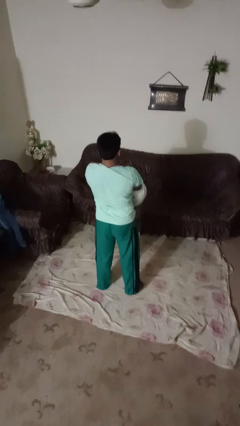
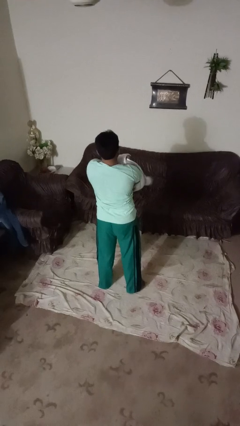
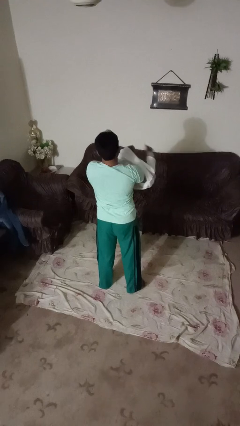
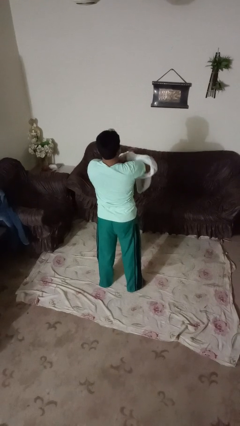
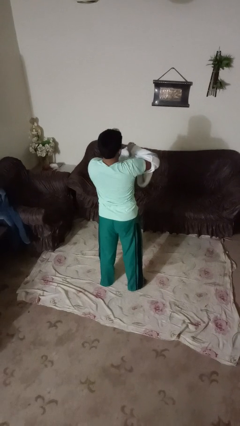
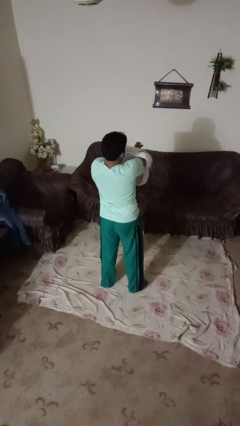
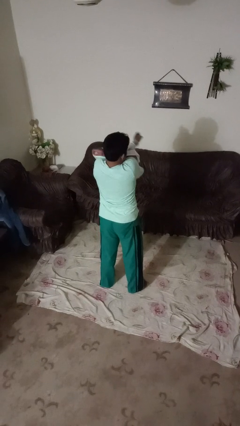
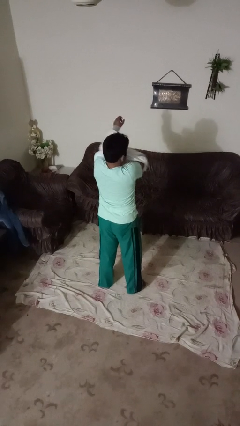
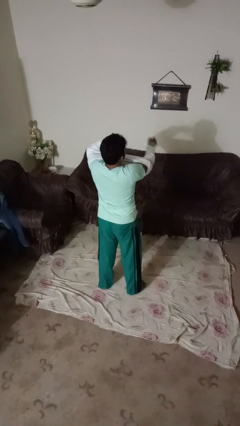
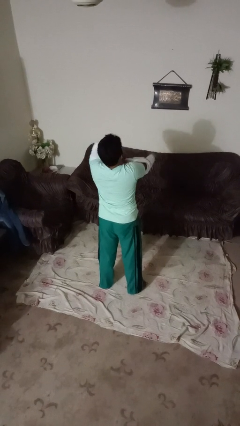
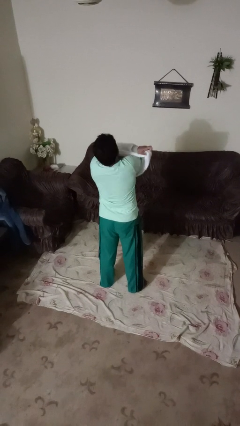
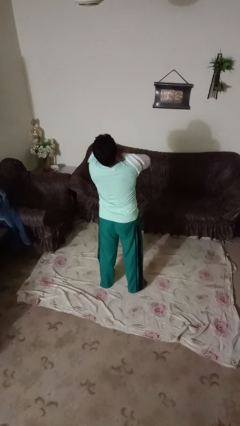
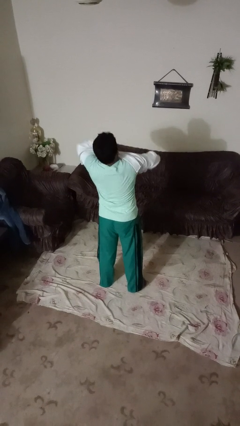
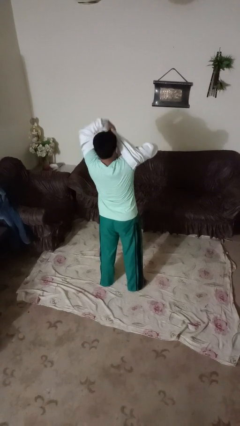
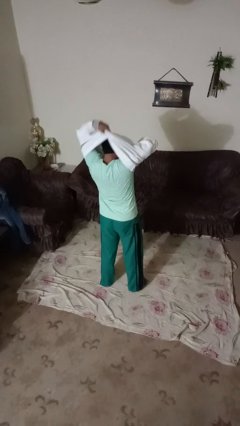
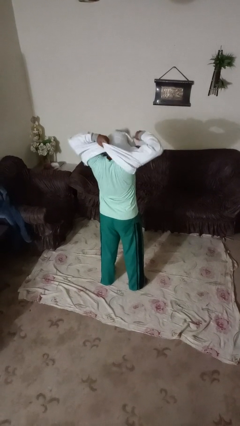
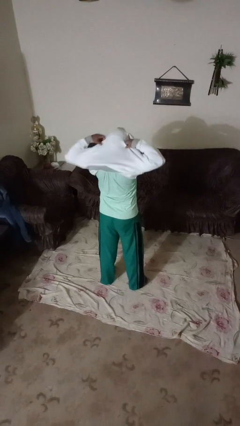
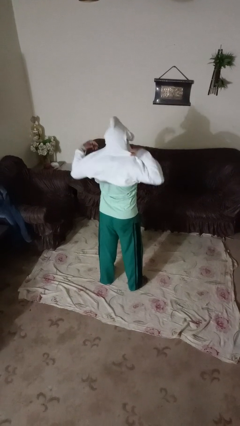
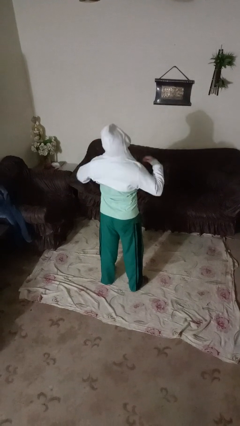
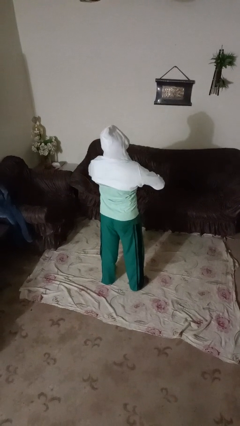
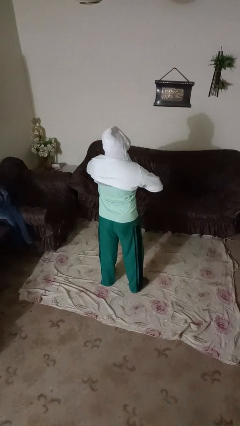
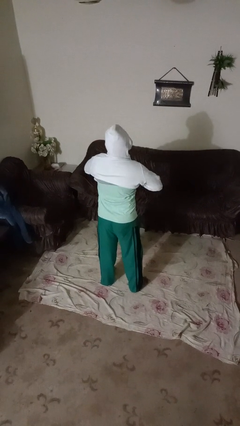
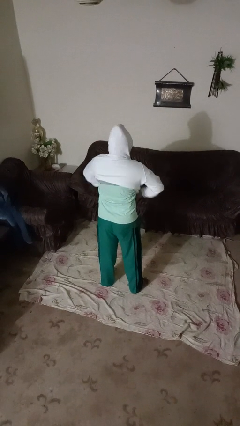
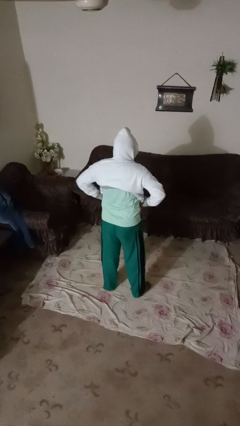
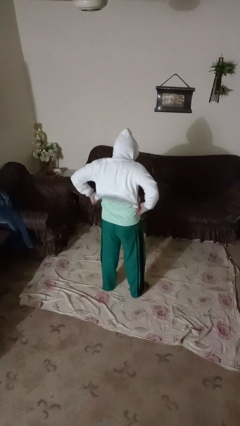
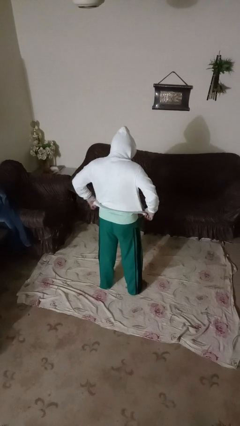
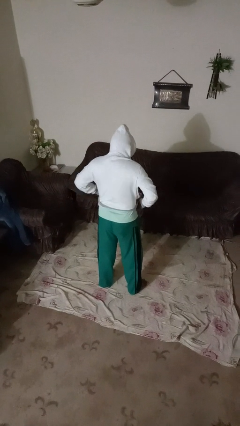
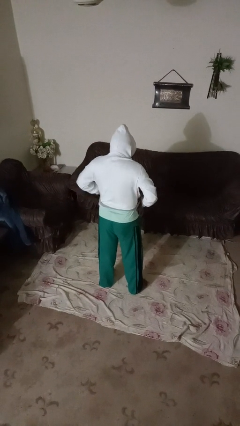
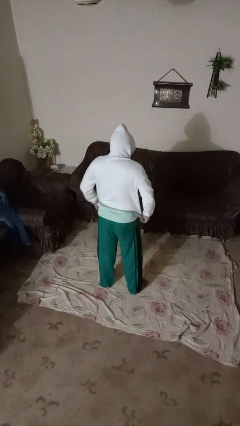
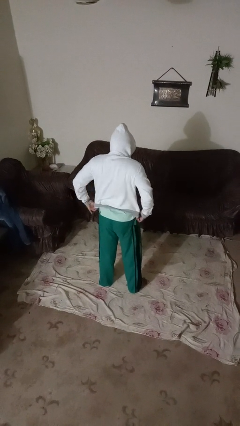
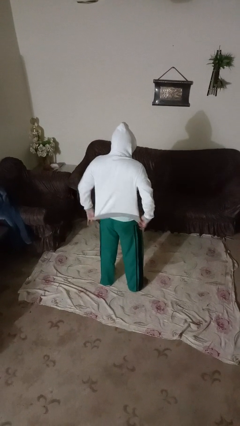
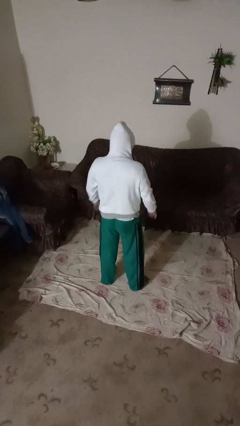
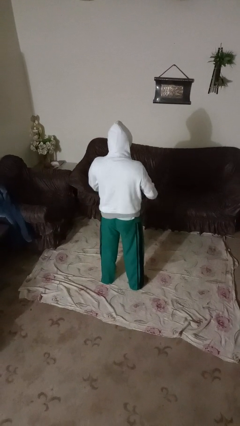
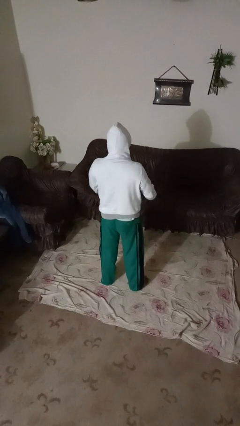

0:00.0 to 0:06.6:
person puts on hoodie

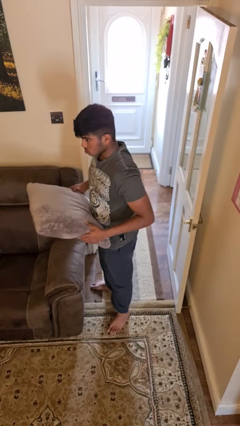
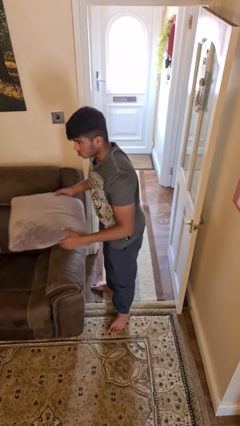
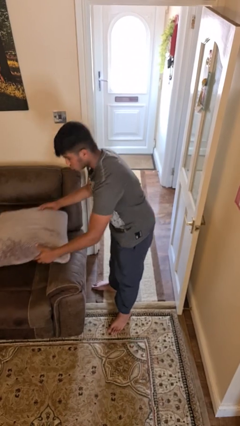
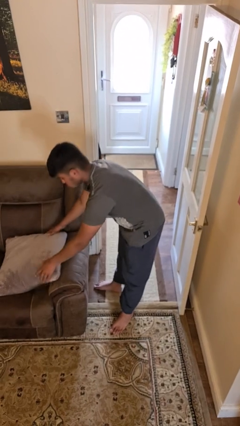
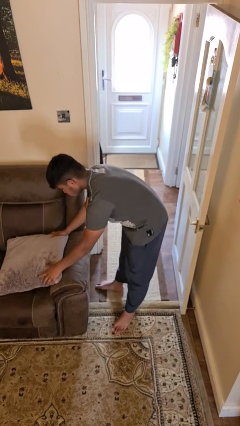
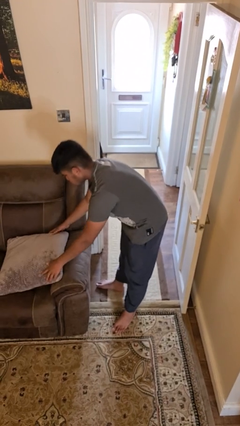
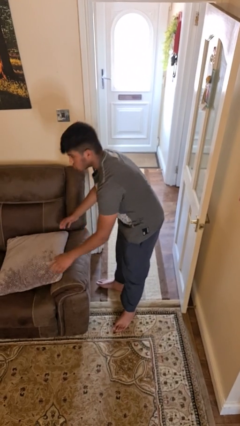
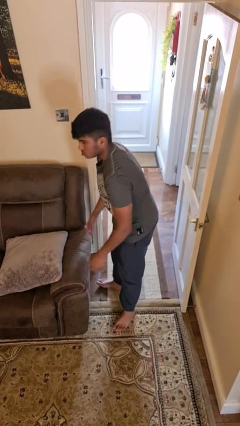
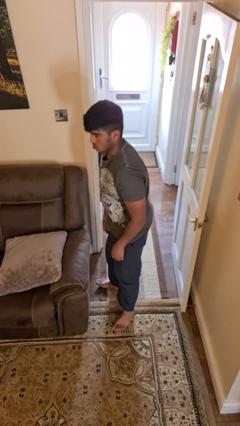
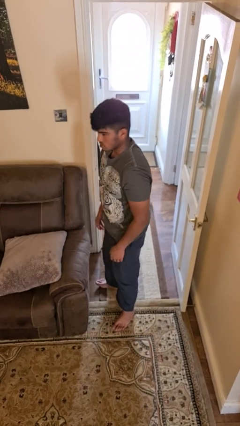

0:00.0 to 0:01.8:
person puts down object on couch

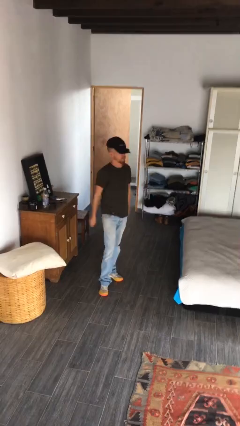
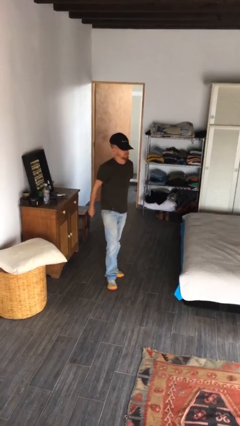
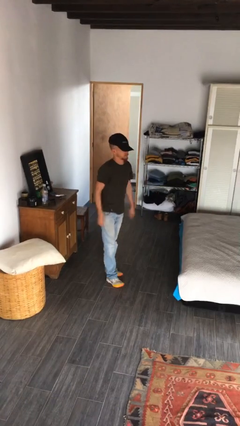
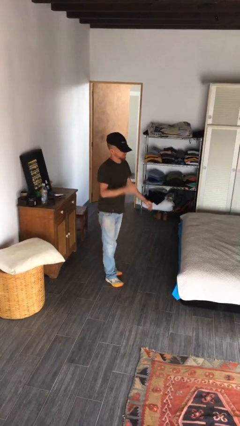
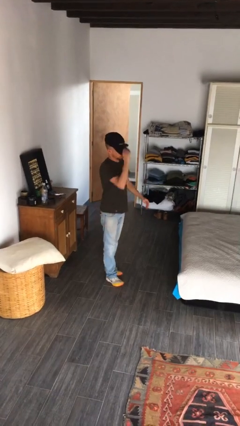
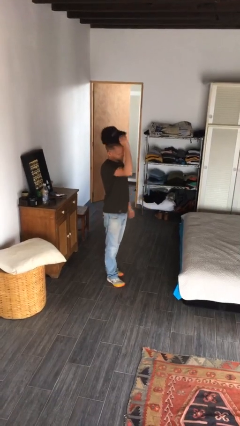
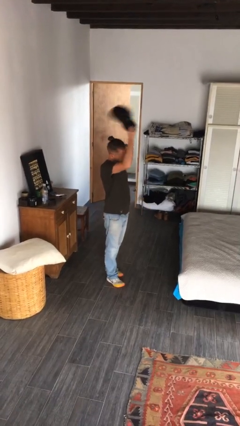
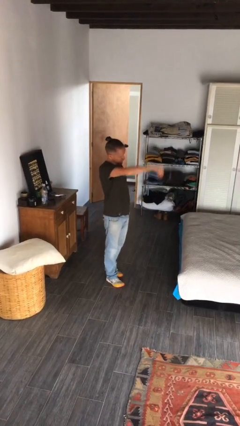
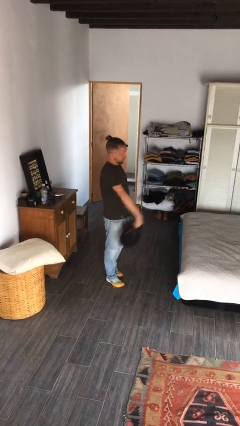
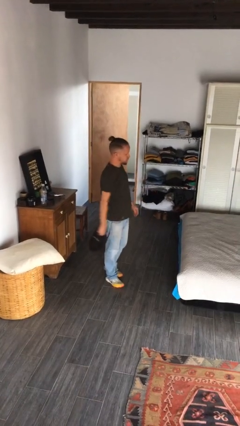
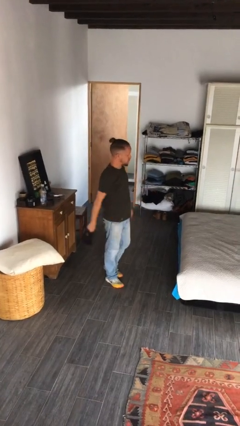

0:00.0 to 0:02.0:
person takes off hat

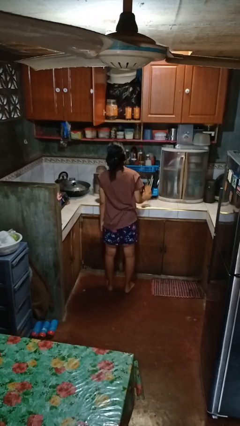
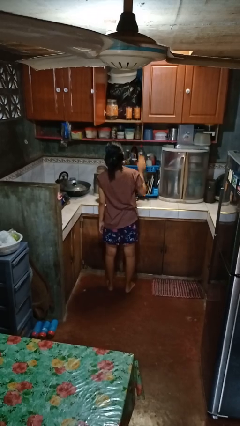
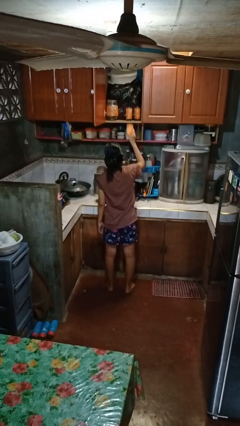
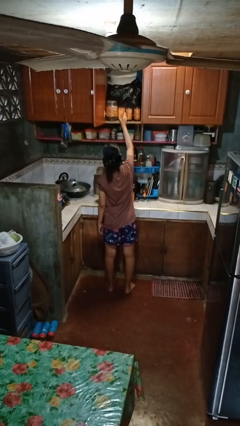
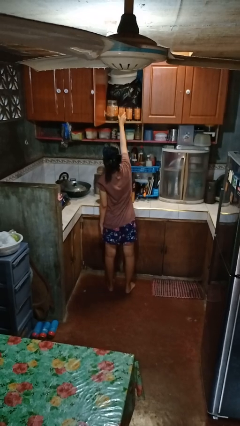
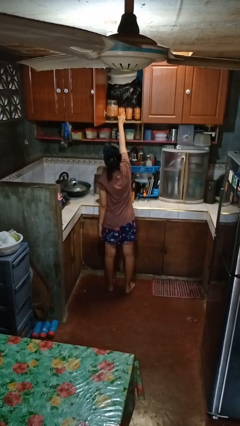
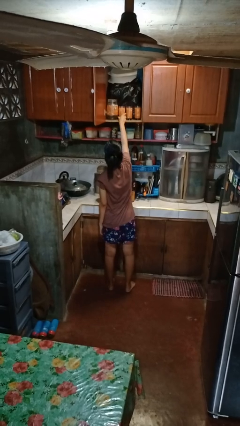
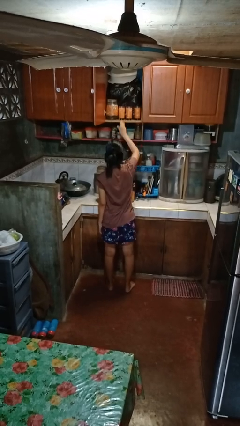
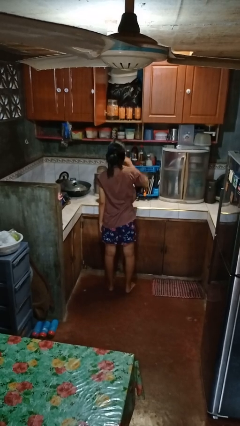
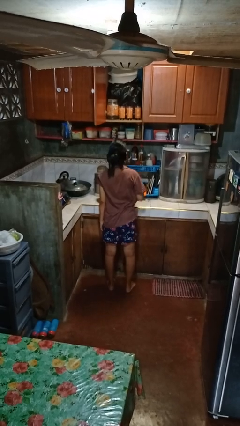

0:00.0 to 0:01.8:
person puts object in cabinet

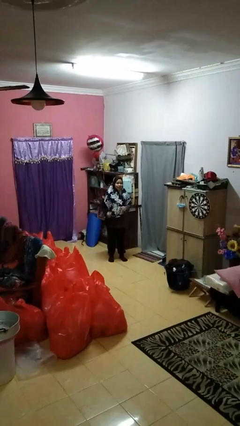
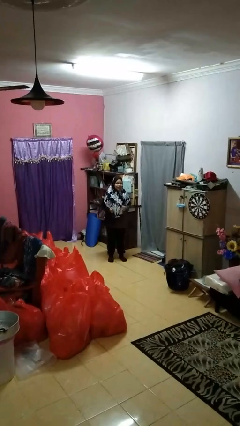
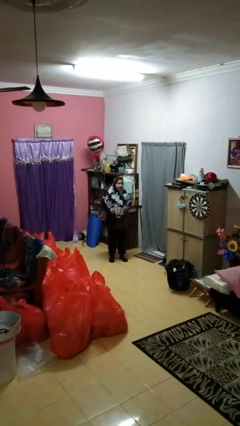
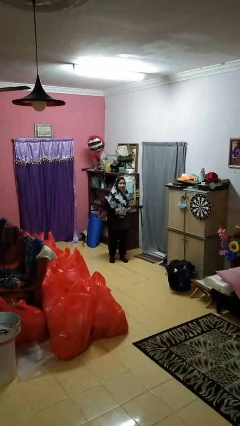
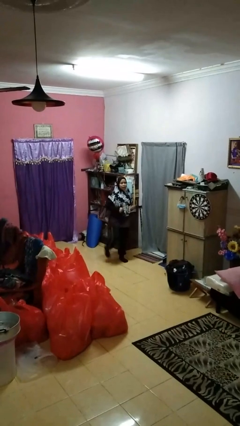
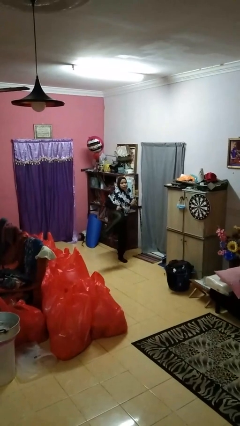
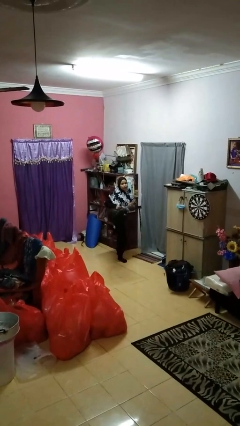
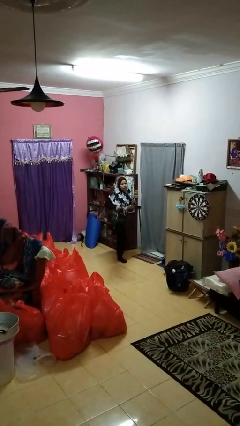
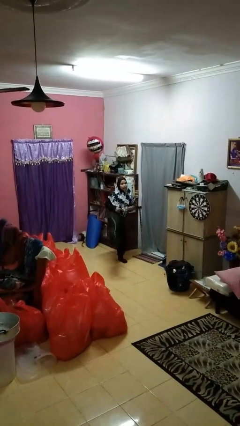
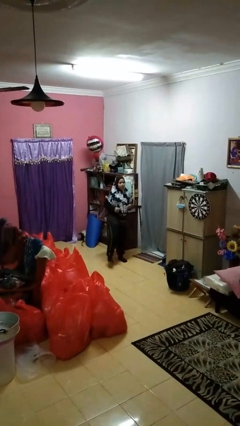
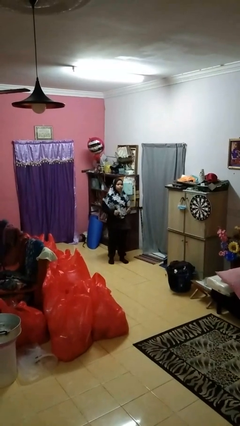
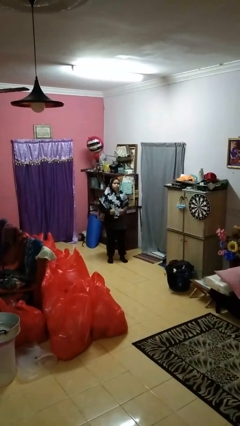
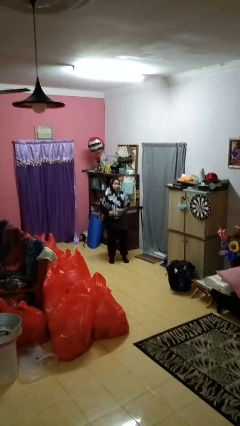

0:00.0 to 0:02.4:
person karate kicks

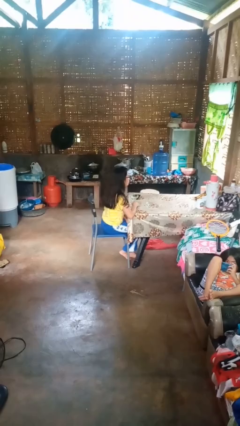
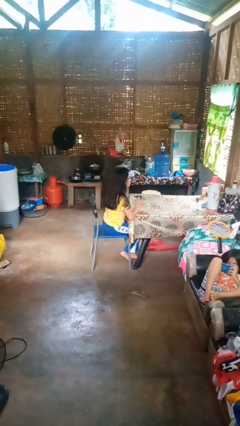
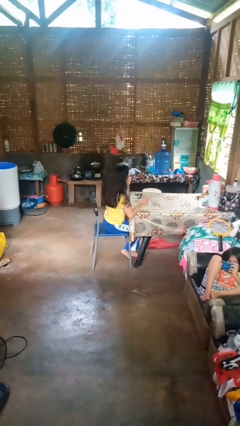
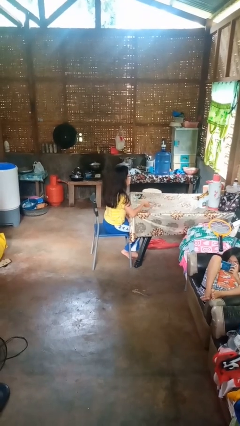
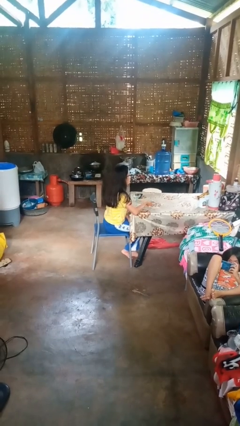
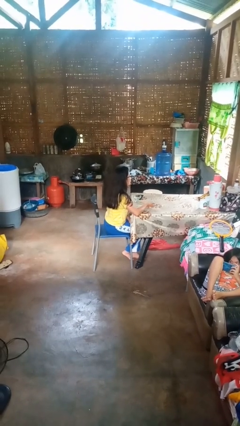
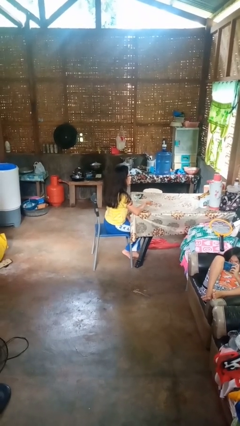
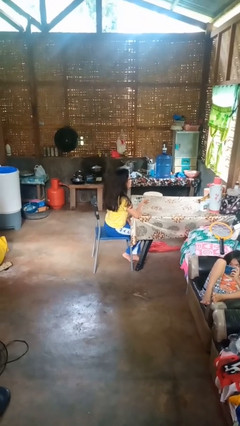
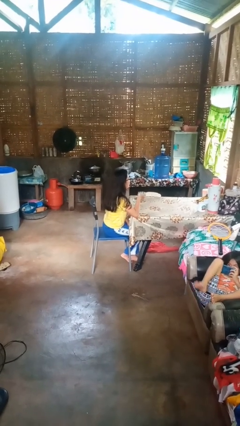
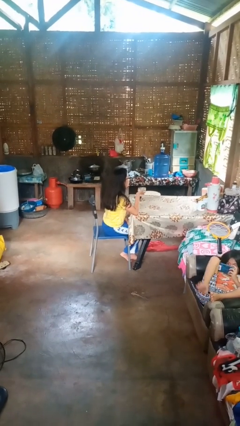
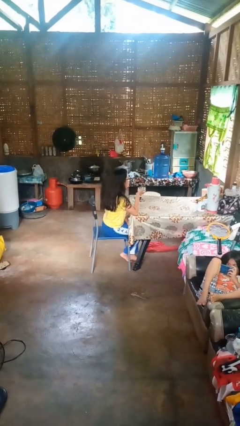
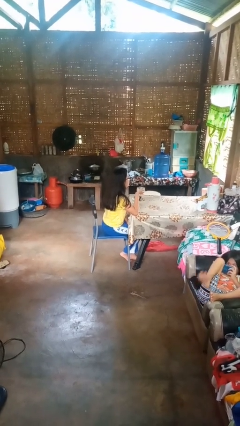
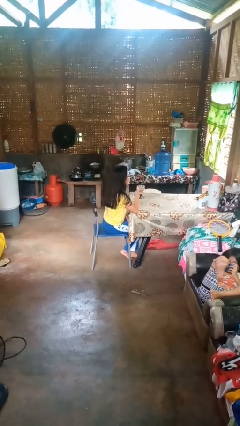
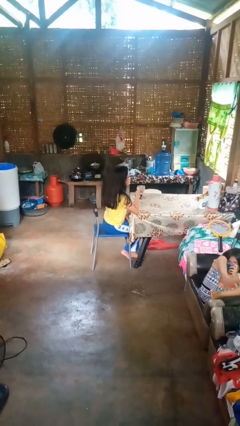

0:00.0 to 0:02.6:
person picks up object from table
